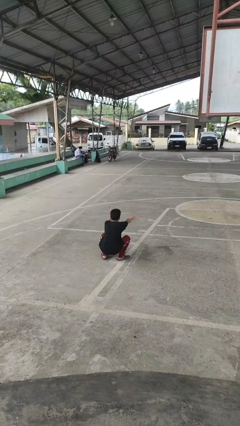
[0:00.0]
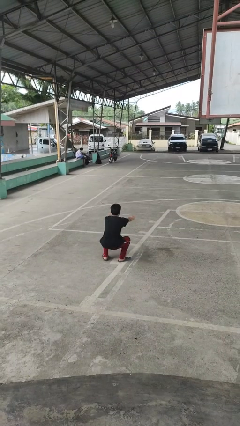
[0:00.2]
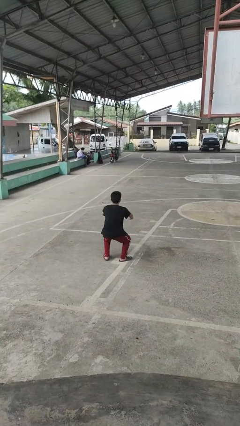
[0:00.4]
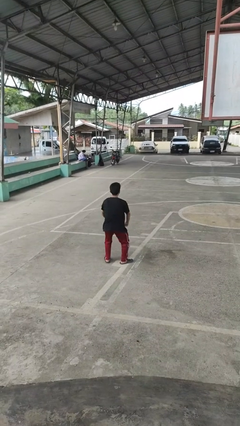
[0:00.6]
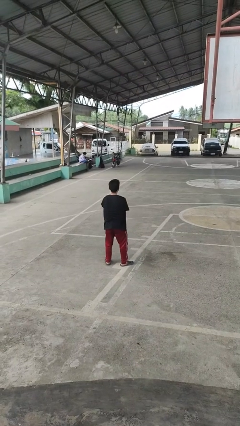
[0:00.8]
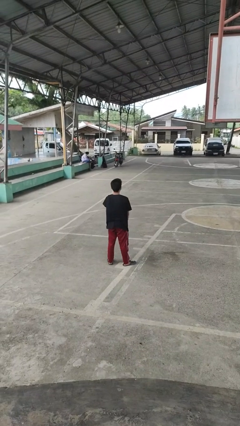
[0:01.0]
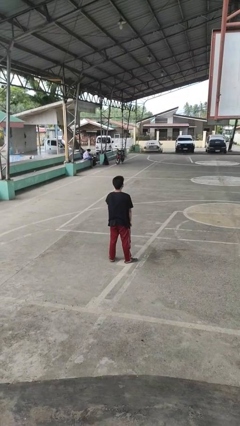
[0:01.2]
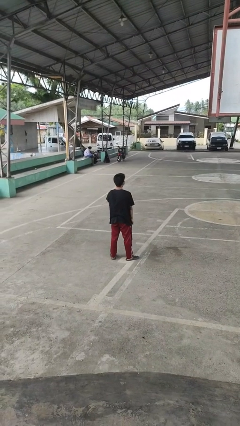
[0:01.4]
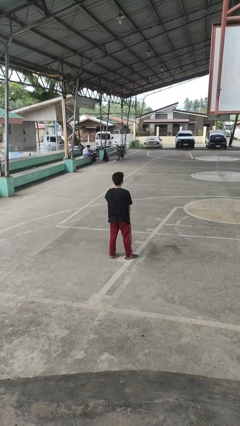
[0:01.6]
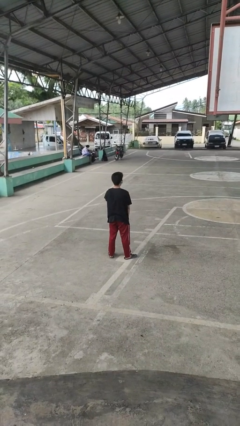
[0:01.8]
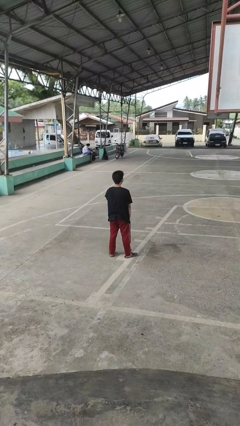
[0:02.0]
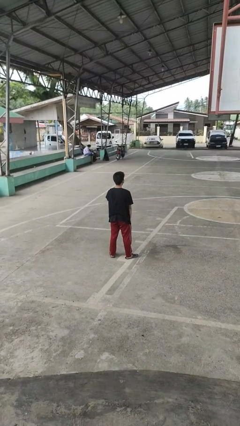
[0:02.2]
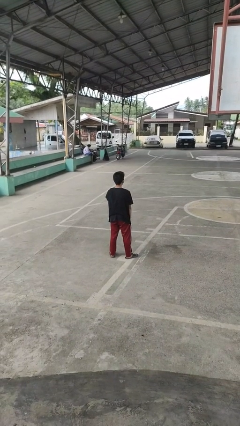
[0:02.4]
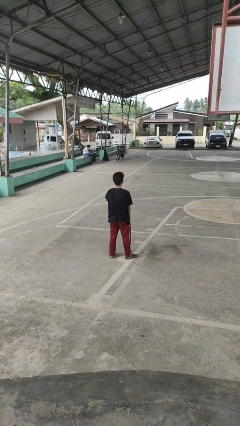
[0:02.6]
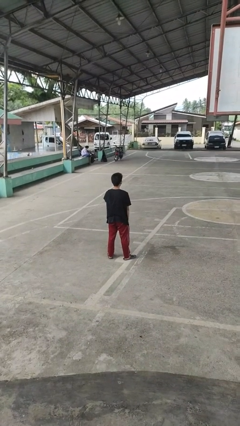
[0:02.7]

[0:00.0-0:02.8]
person stands up

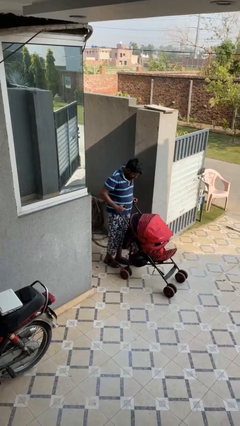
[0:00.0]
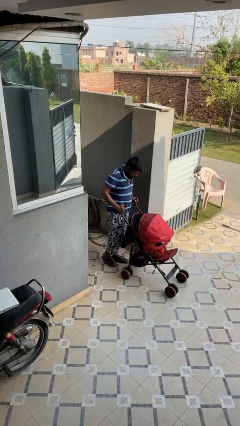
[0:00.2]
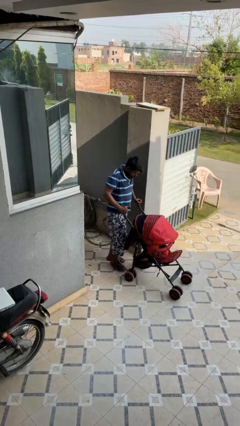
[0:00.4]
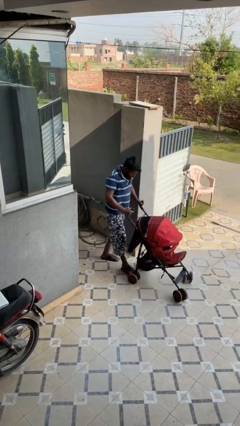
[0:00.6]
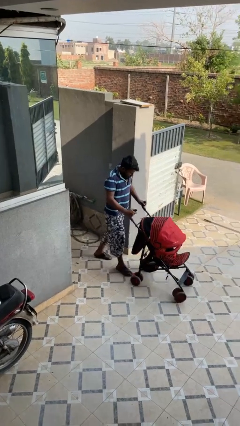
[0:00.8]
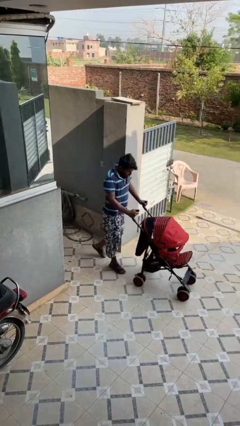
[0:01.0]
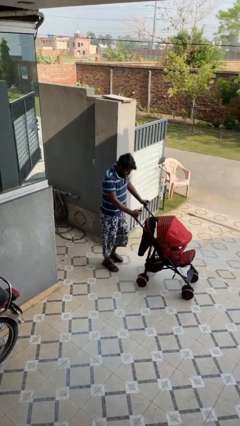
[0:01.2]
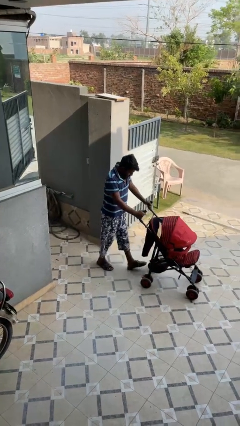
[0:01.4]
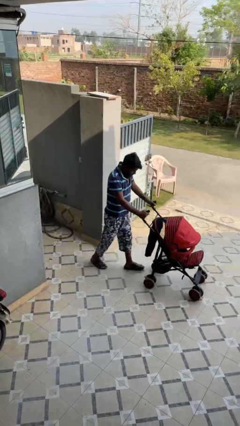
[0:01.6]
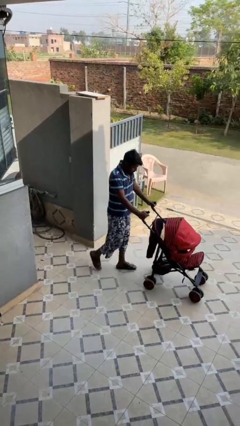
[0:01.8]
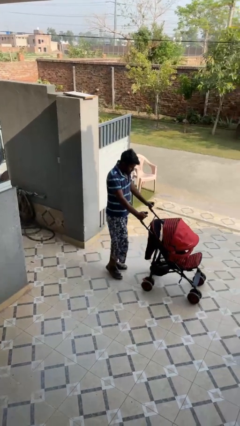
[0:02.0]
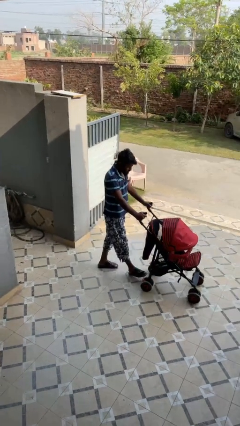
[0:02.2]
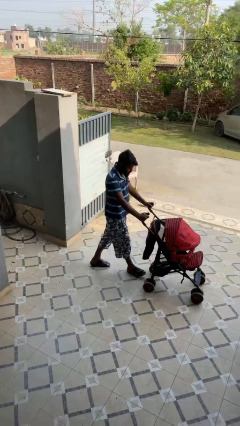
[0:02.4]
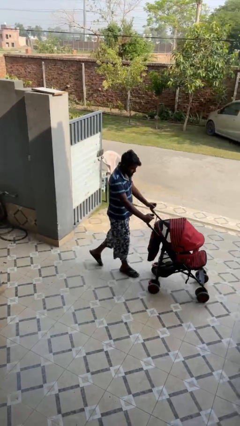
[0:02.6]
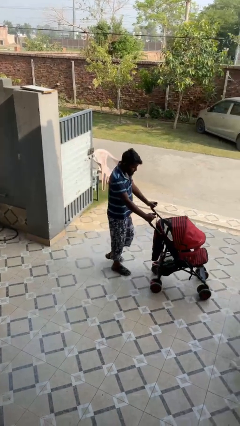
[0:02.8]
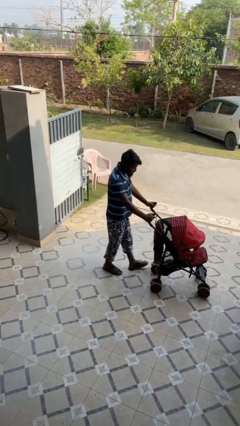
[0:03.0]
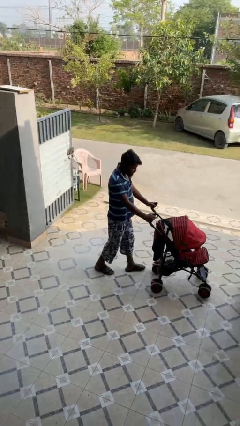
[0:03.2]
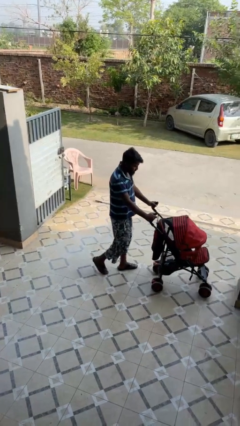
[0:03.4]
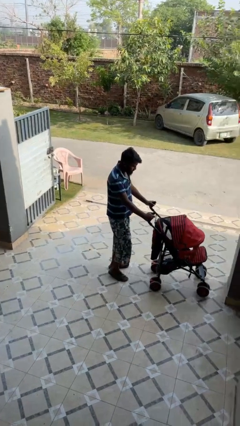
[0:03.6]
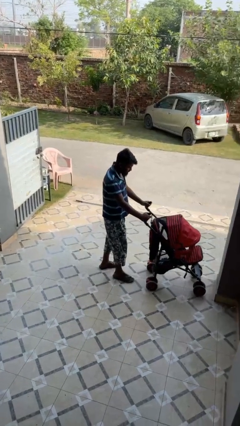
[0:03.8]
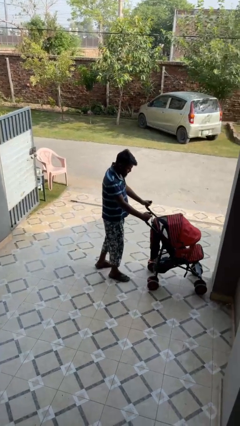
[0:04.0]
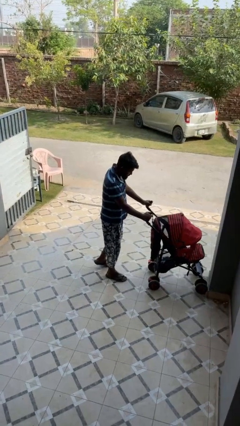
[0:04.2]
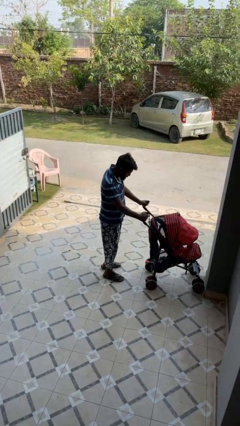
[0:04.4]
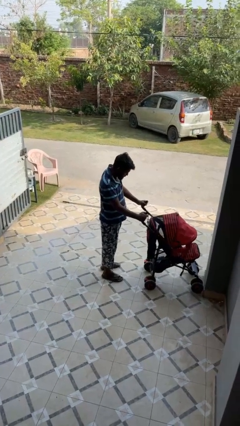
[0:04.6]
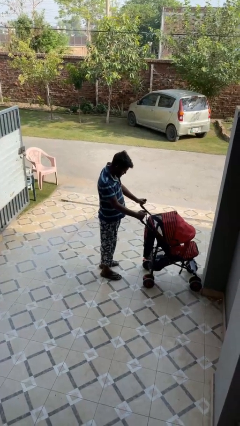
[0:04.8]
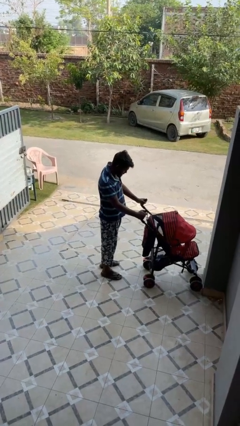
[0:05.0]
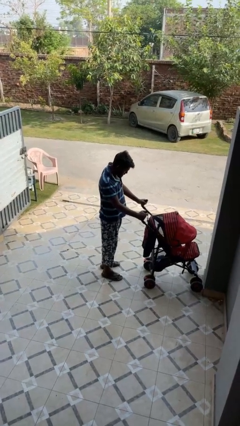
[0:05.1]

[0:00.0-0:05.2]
person pushes wheeled cart

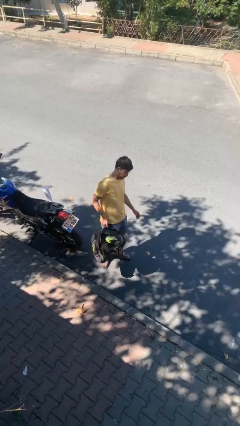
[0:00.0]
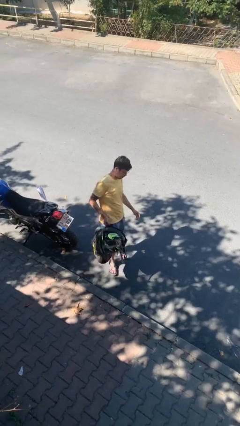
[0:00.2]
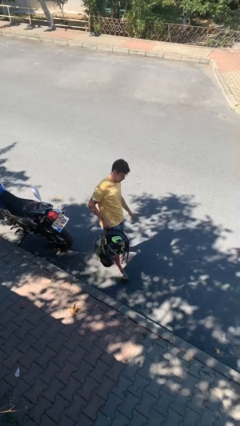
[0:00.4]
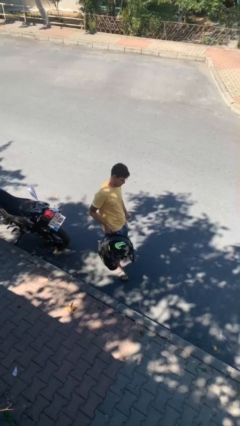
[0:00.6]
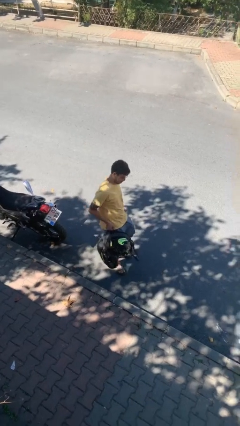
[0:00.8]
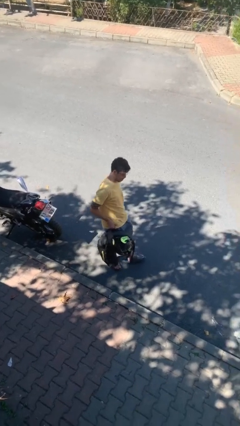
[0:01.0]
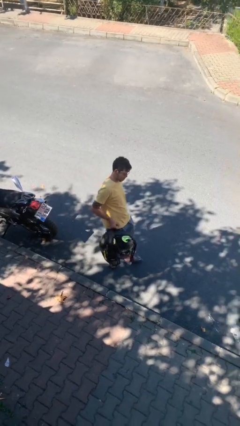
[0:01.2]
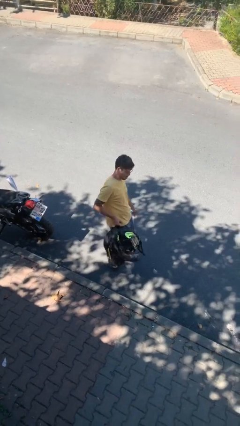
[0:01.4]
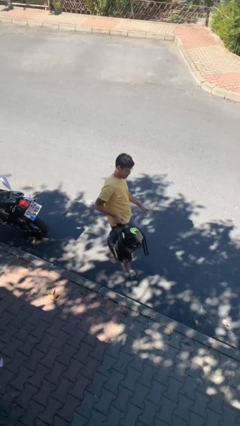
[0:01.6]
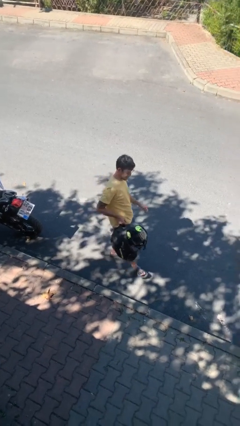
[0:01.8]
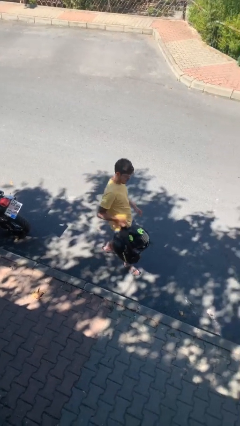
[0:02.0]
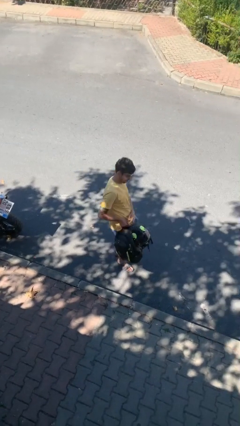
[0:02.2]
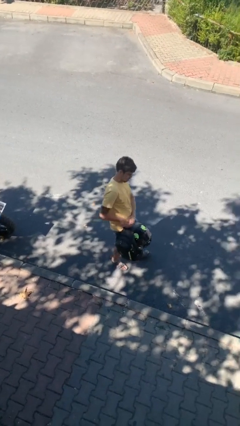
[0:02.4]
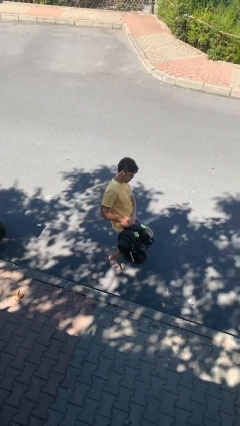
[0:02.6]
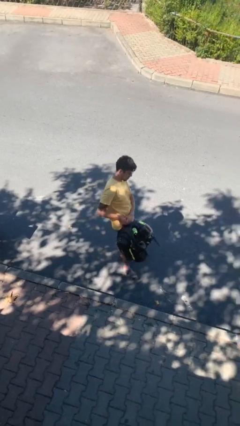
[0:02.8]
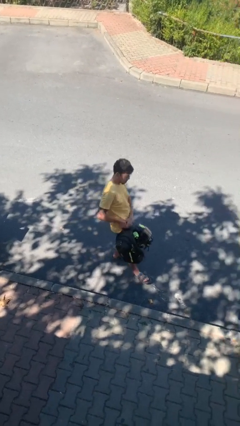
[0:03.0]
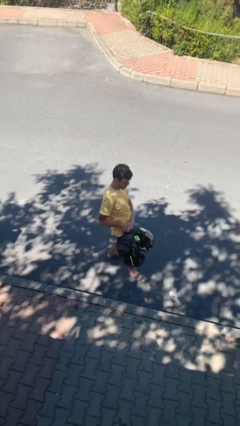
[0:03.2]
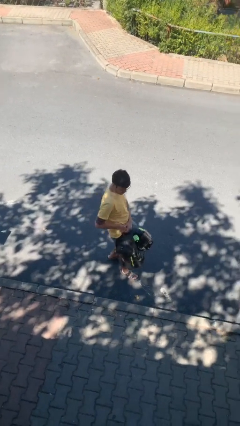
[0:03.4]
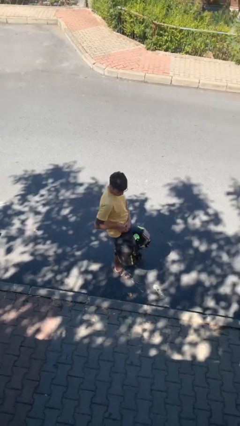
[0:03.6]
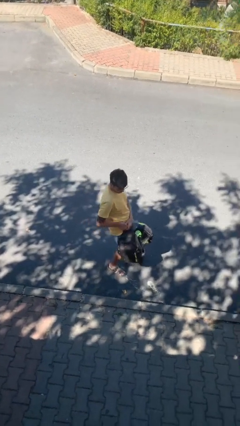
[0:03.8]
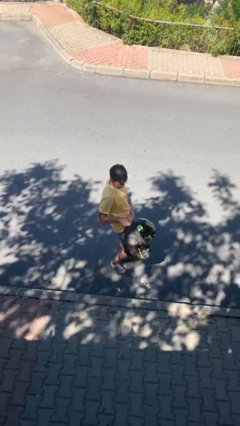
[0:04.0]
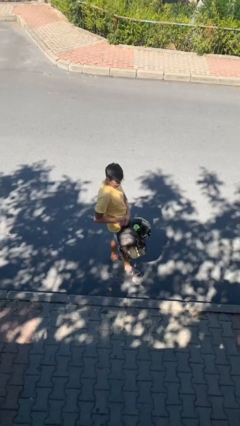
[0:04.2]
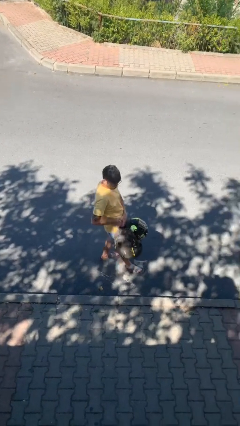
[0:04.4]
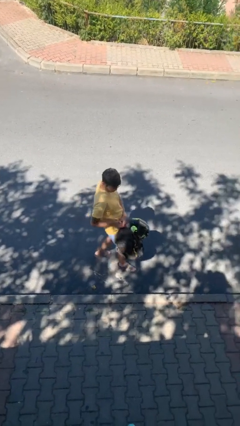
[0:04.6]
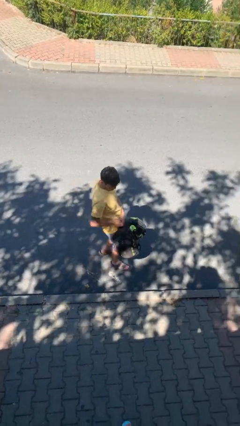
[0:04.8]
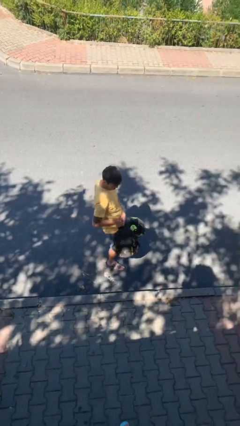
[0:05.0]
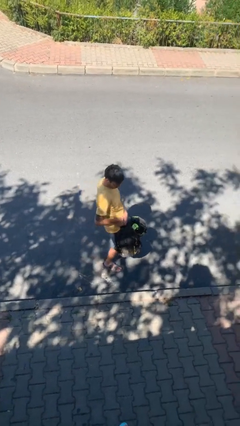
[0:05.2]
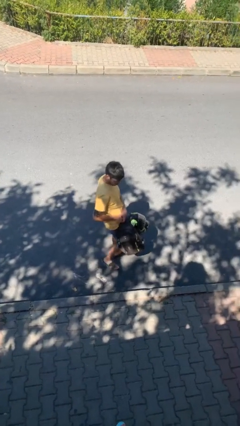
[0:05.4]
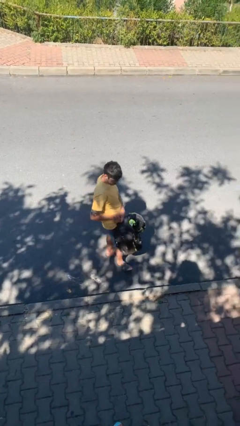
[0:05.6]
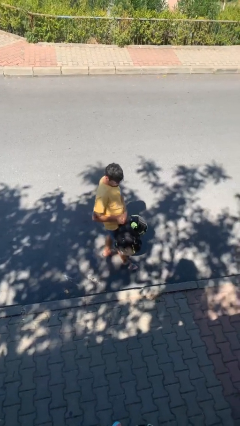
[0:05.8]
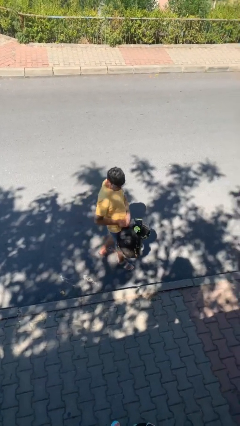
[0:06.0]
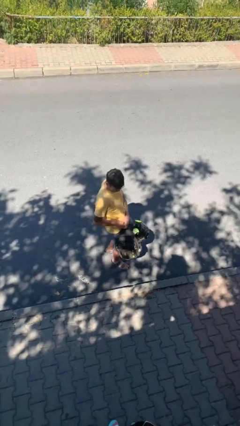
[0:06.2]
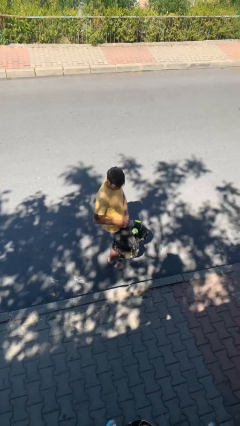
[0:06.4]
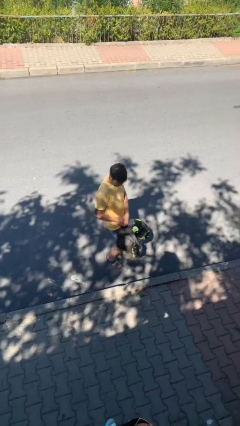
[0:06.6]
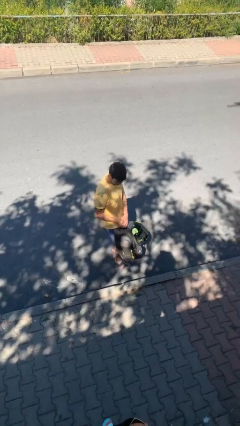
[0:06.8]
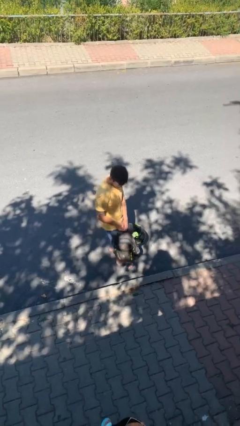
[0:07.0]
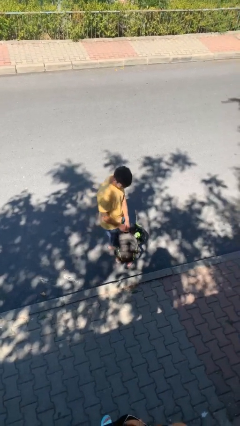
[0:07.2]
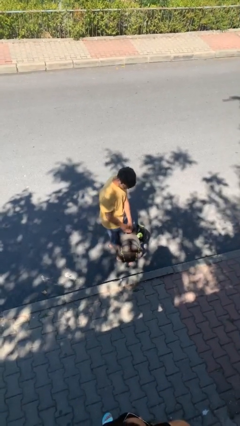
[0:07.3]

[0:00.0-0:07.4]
person carries heavy object

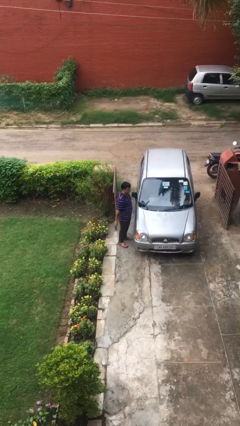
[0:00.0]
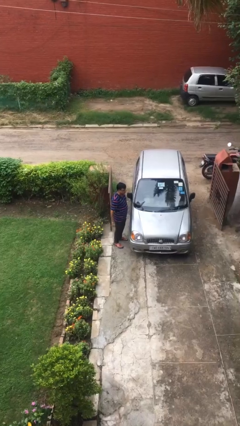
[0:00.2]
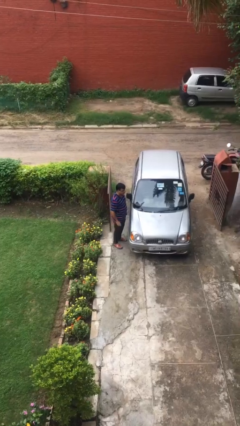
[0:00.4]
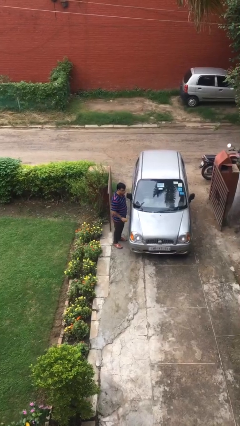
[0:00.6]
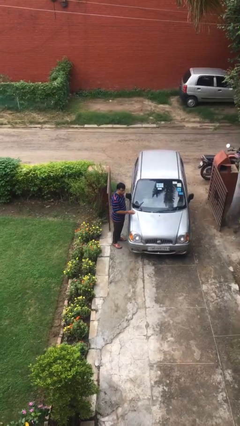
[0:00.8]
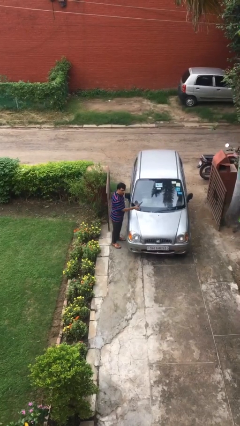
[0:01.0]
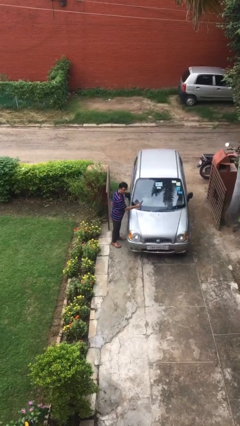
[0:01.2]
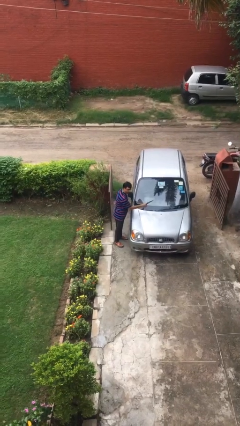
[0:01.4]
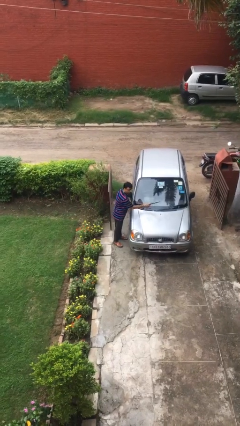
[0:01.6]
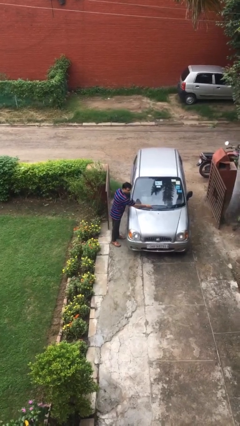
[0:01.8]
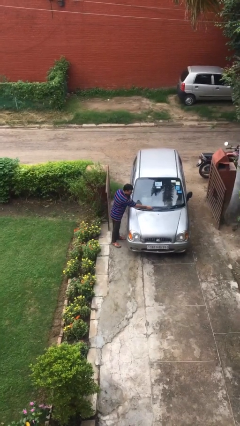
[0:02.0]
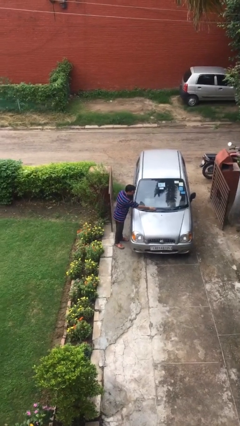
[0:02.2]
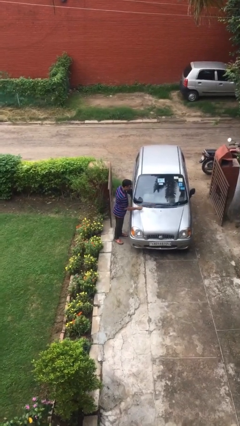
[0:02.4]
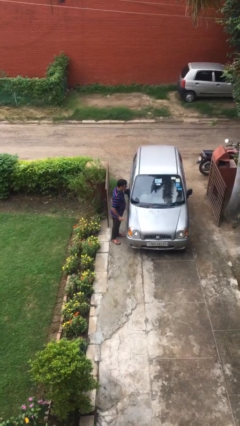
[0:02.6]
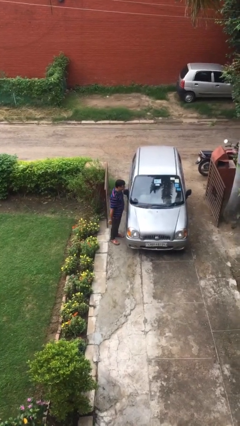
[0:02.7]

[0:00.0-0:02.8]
person flips down car wipers

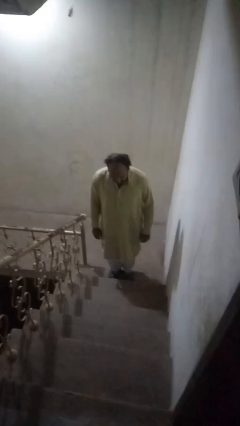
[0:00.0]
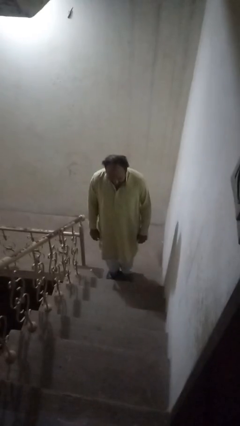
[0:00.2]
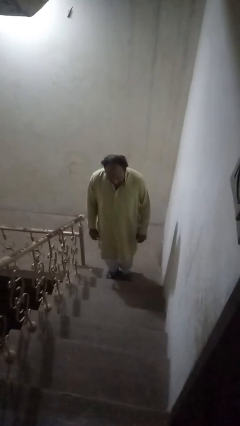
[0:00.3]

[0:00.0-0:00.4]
person climbs down ladder
